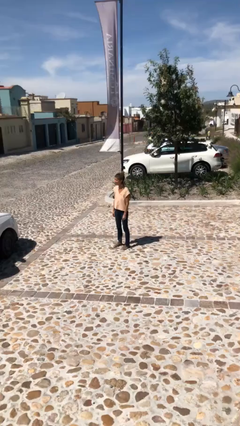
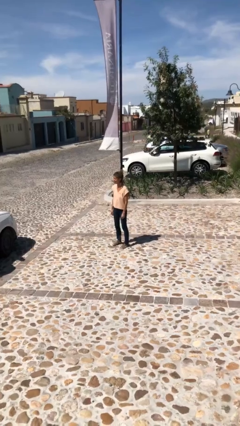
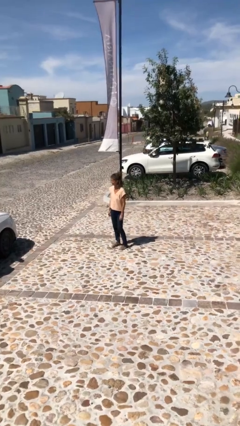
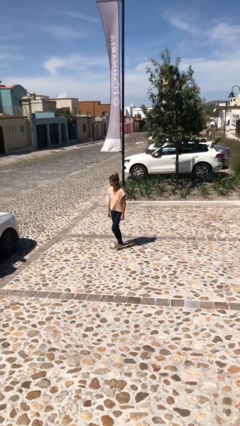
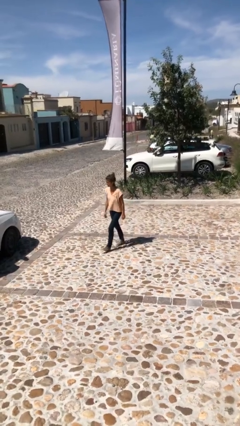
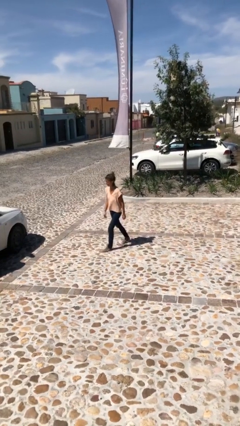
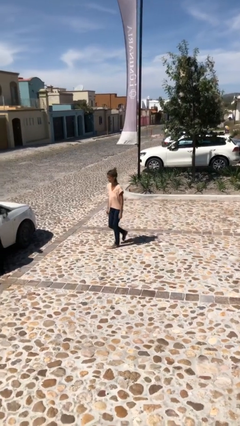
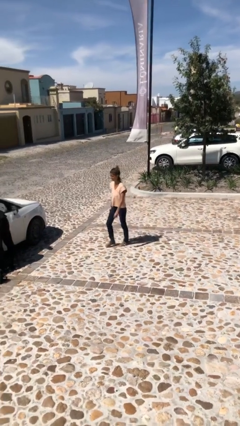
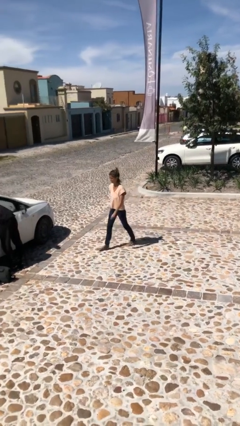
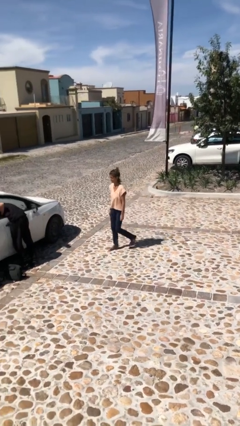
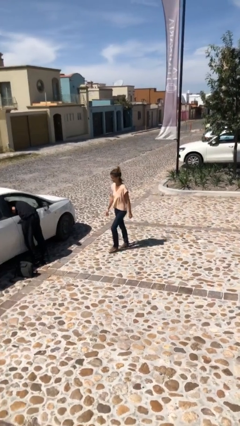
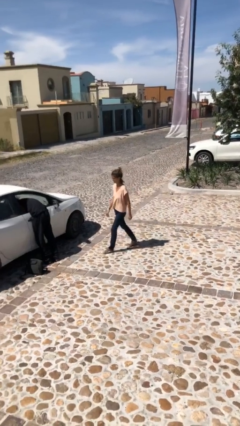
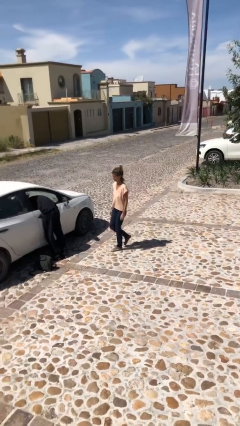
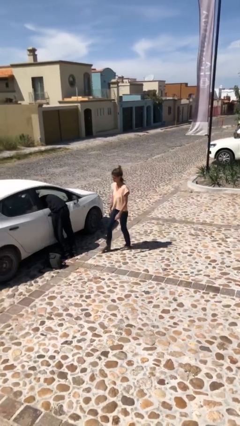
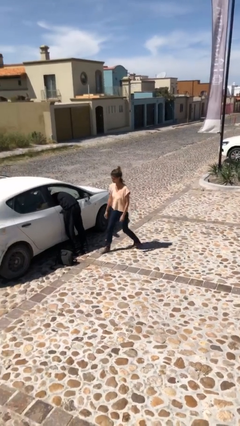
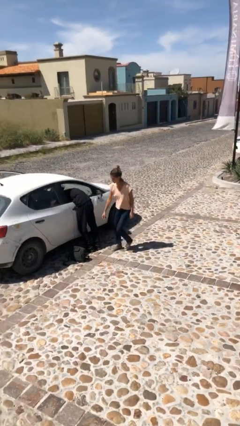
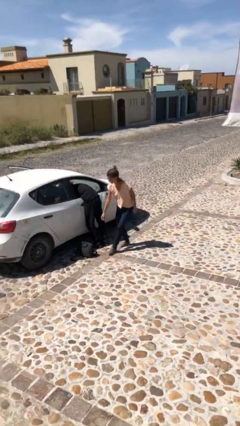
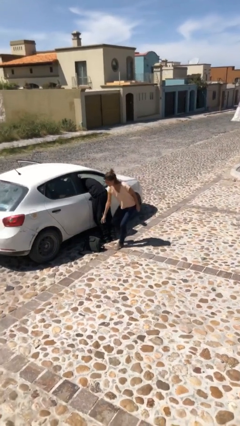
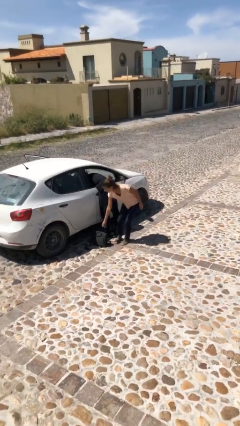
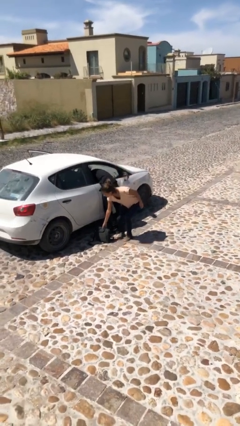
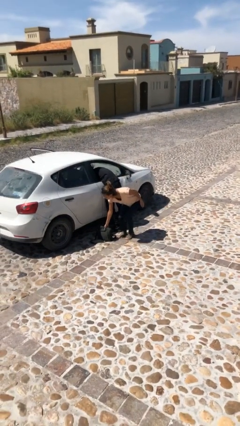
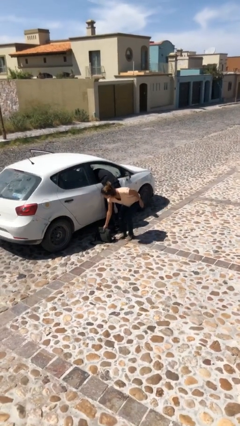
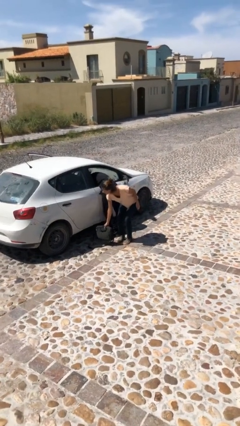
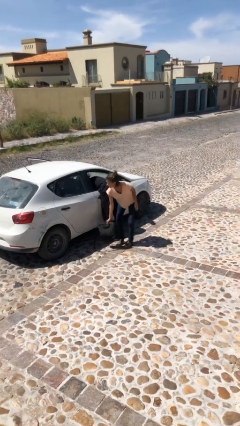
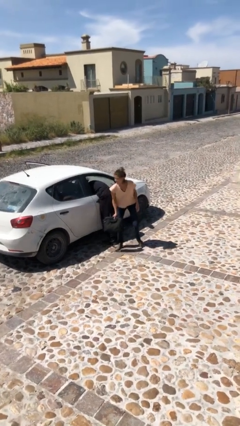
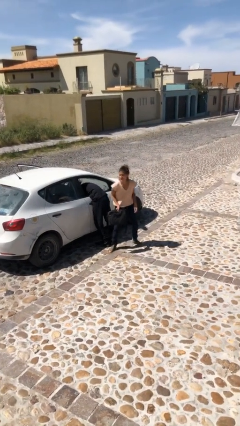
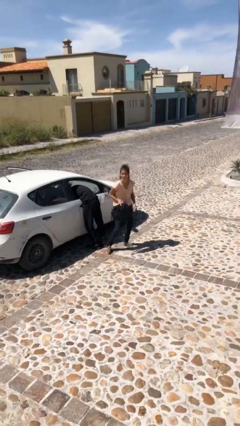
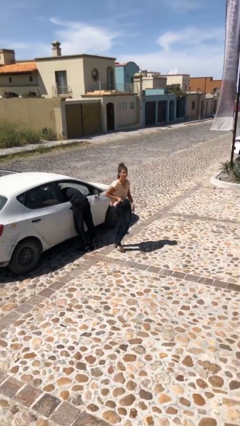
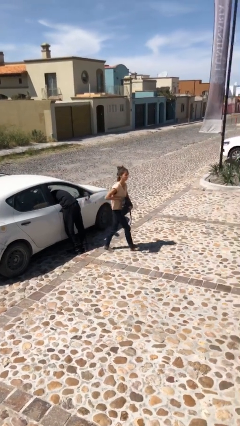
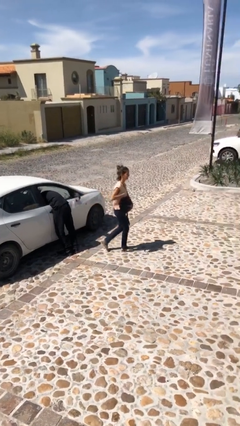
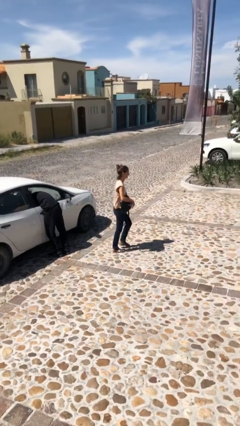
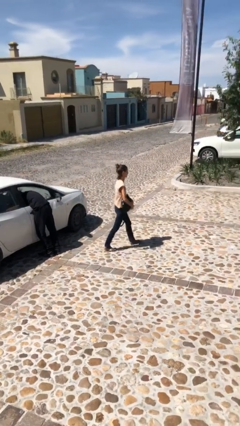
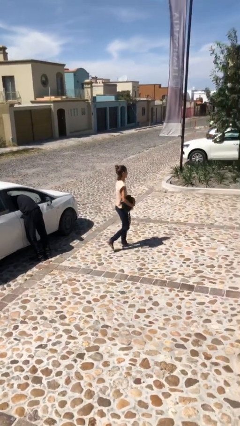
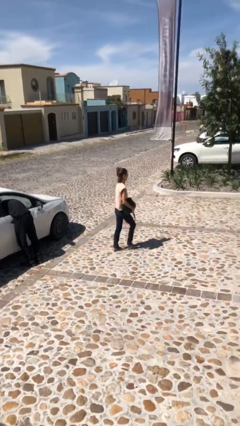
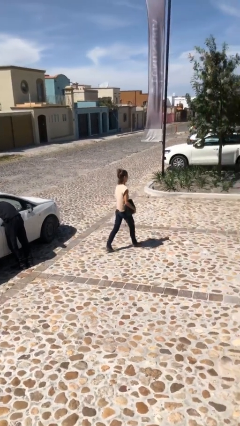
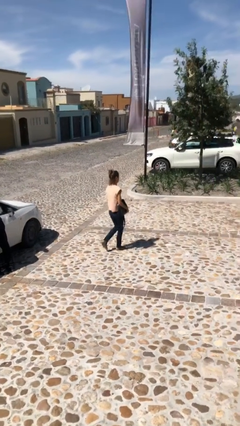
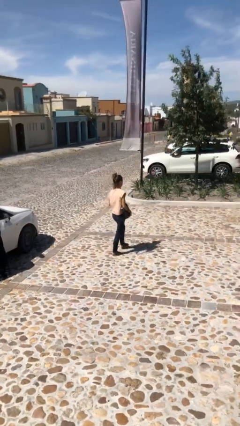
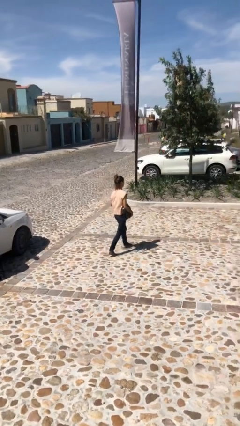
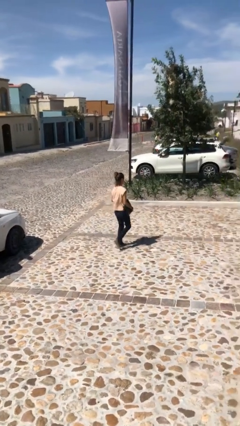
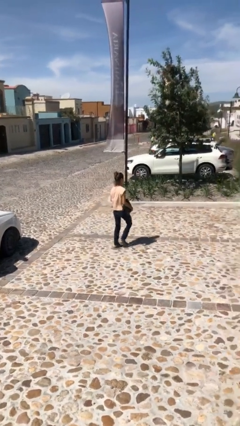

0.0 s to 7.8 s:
person steals object from person

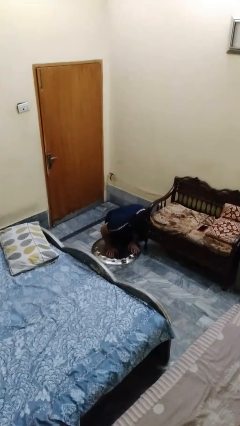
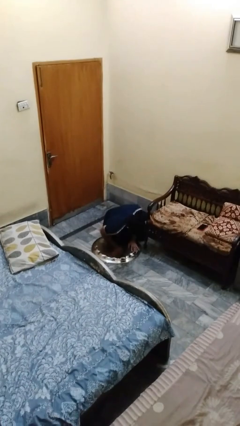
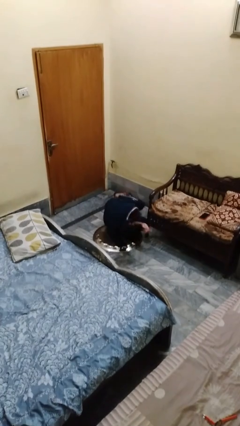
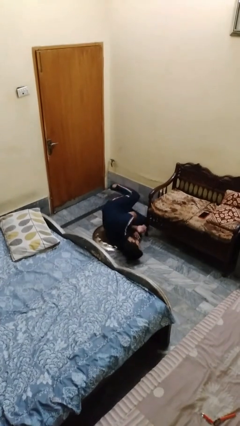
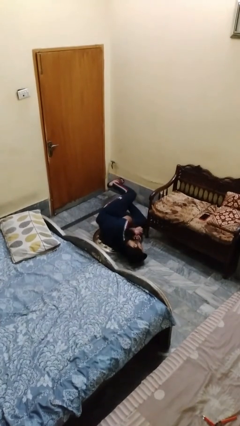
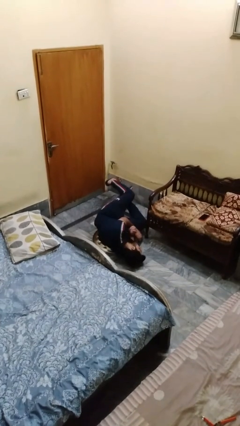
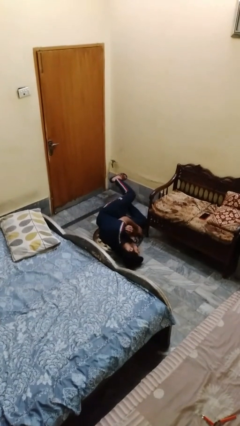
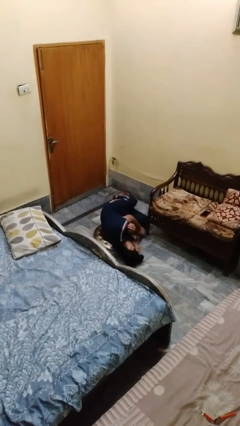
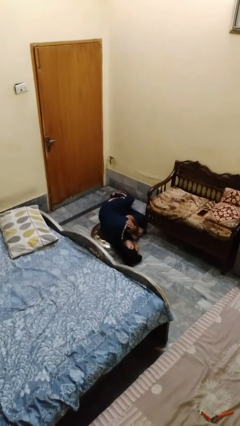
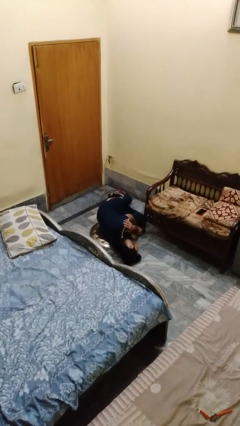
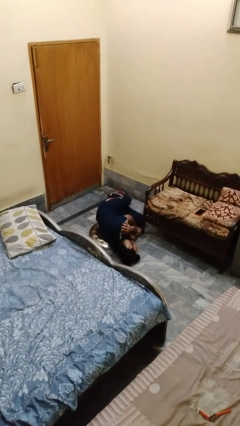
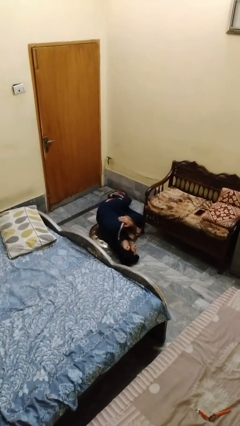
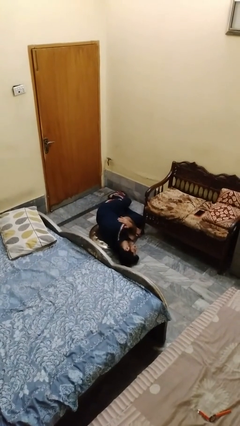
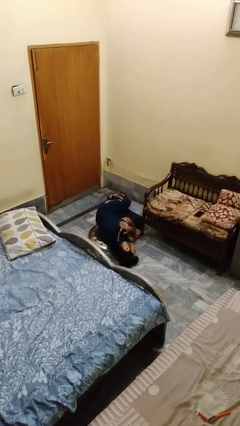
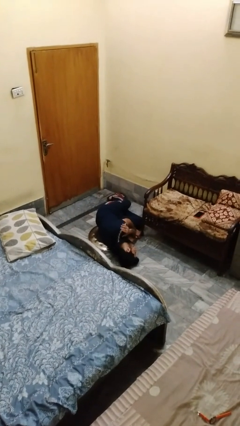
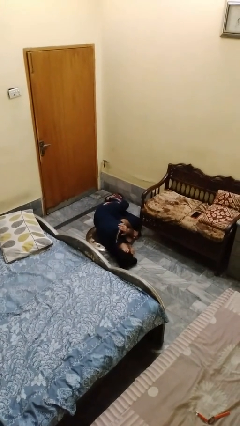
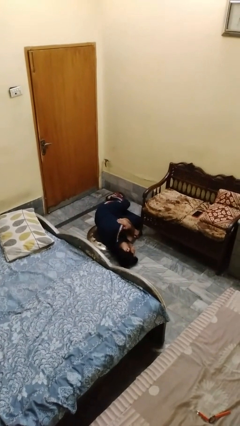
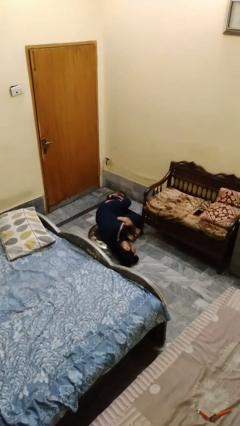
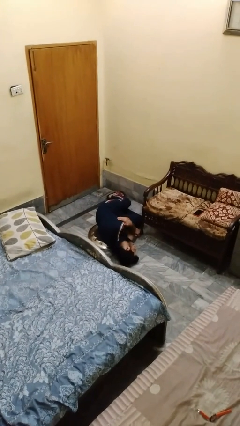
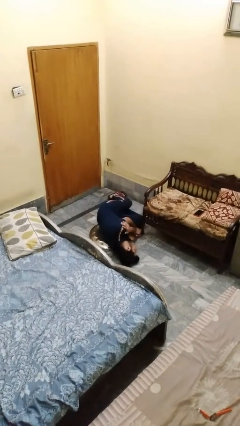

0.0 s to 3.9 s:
person lies down on floor

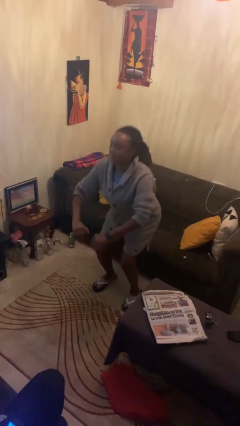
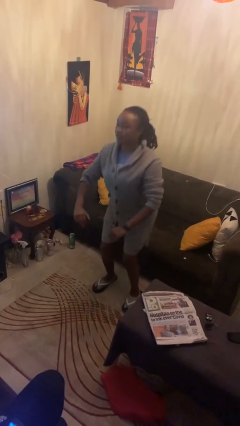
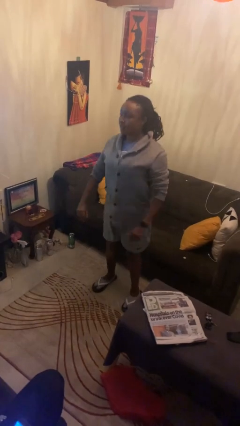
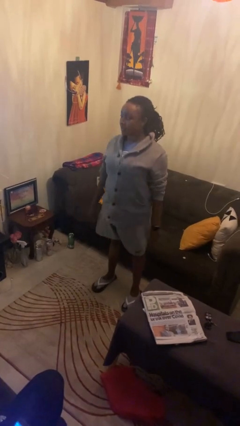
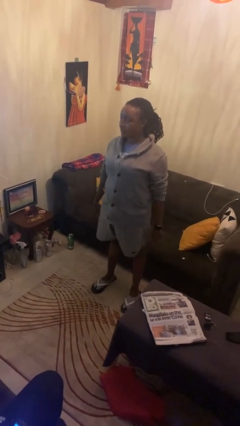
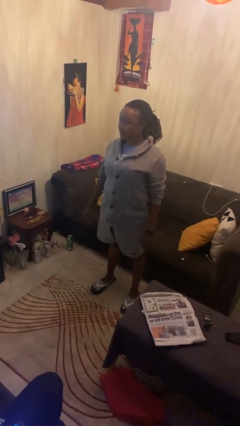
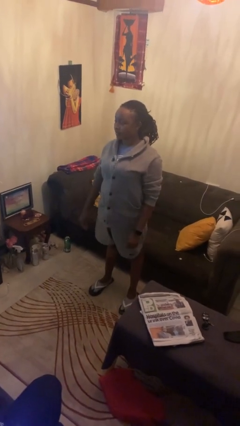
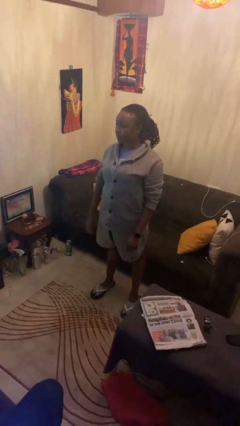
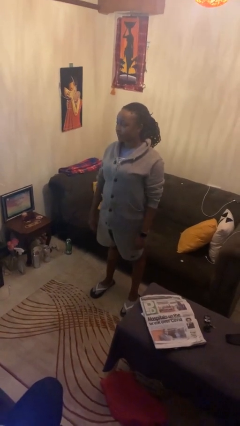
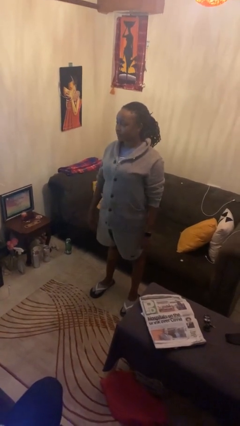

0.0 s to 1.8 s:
person stands up

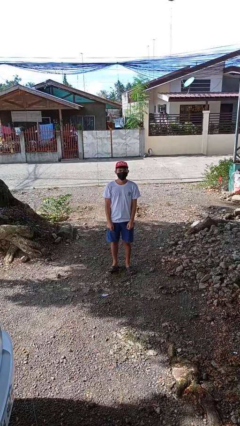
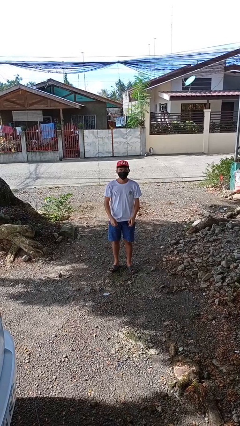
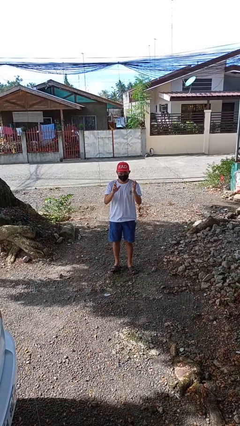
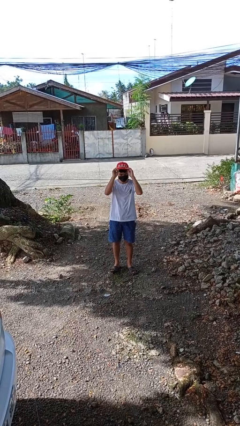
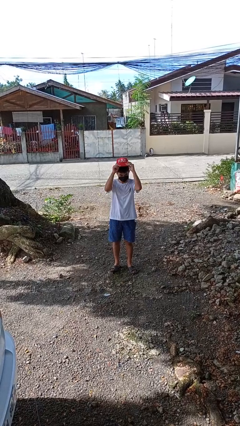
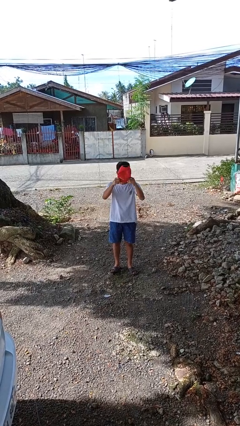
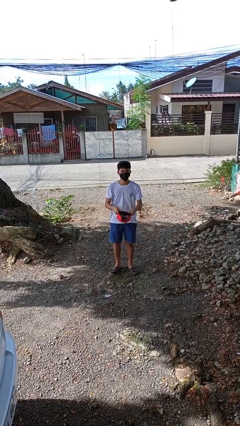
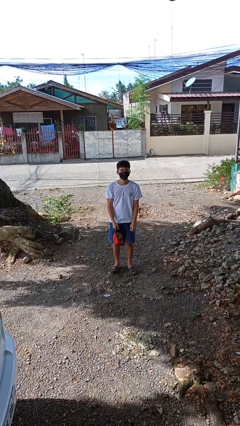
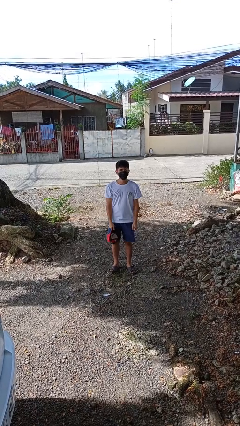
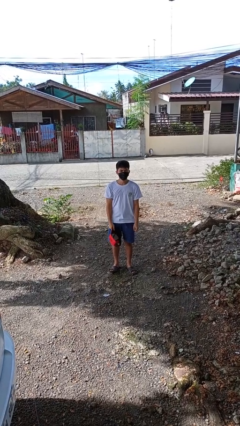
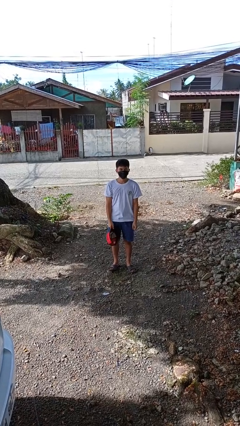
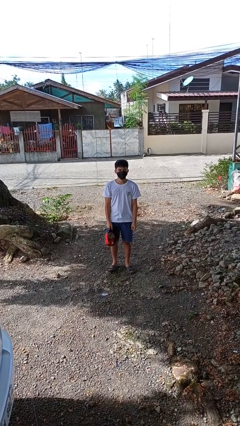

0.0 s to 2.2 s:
person takes off hat

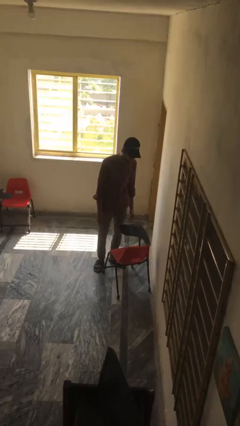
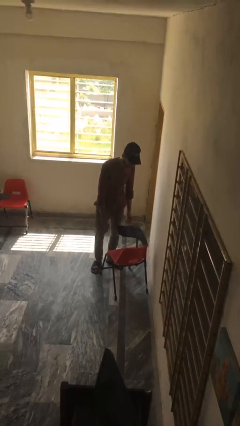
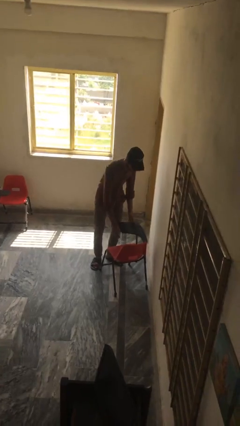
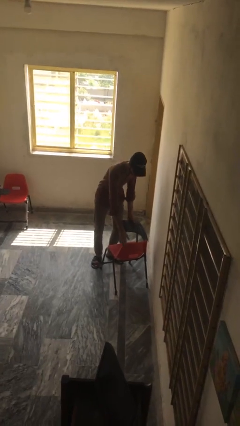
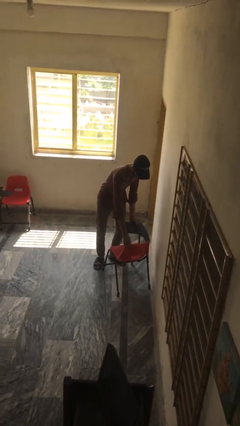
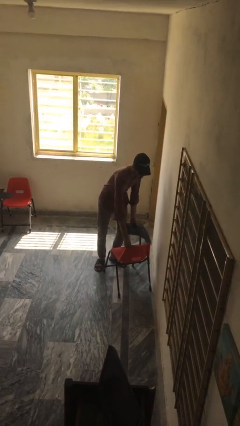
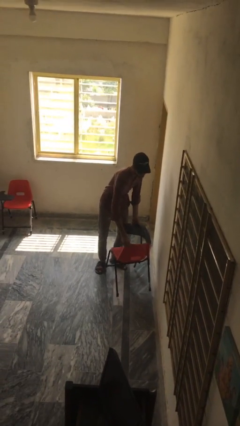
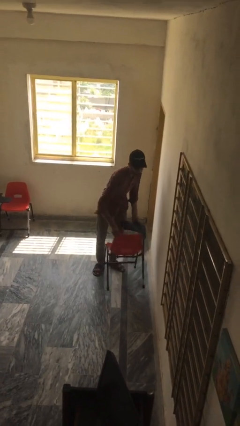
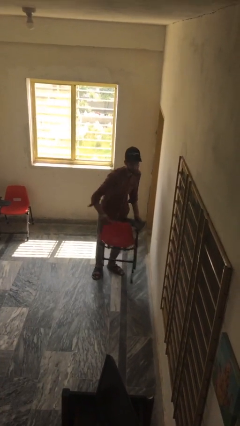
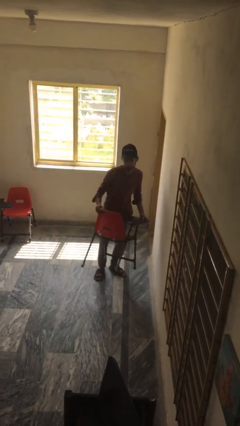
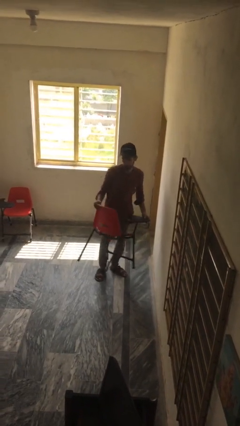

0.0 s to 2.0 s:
person picks up object from floor
